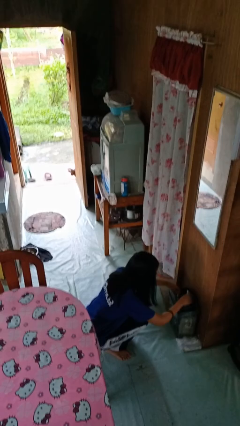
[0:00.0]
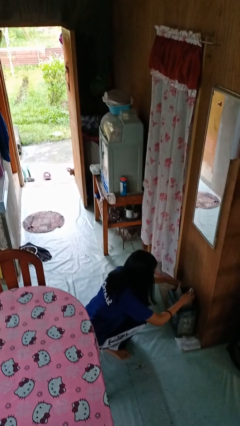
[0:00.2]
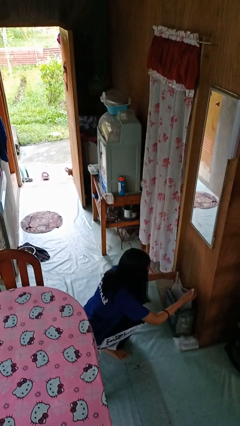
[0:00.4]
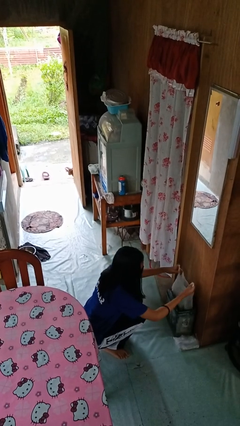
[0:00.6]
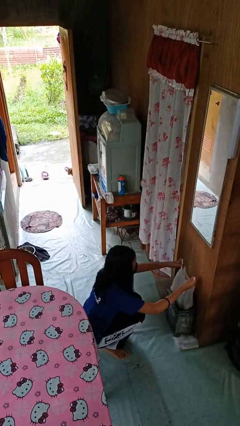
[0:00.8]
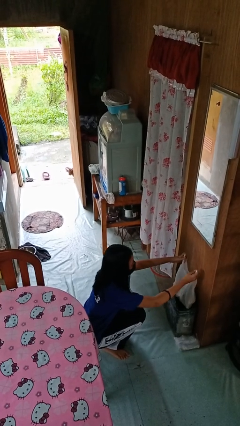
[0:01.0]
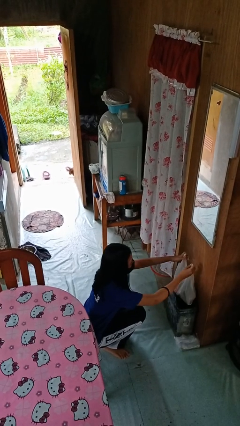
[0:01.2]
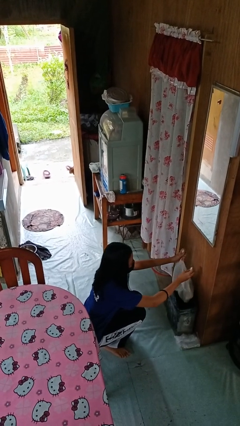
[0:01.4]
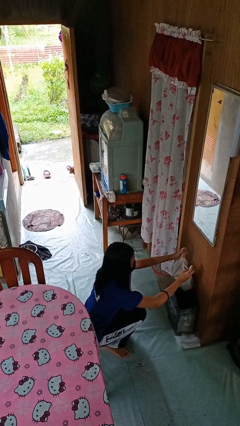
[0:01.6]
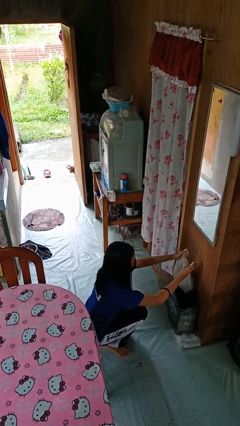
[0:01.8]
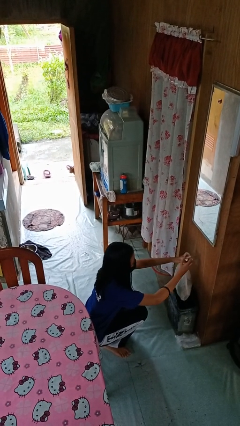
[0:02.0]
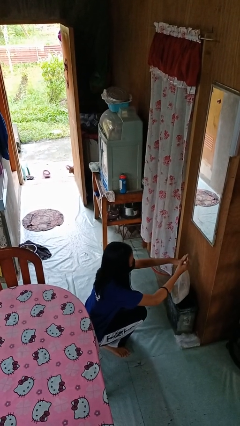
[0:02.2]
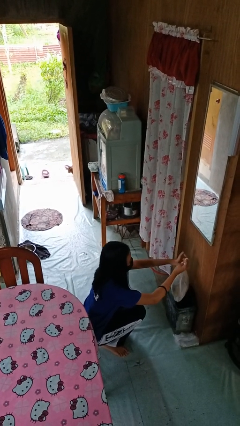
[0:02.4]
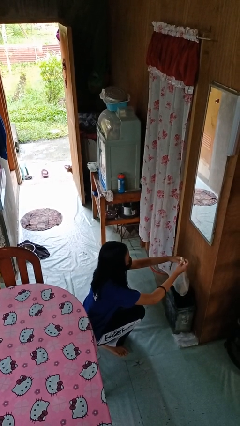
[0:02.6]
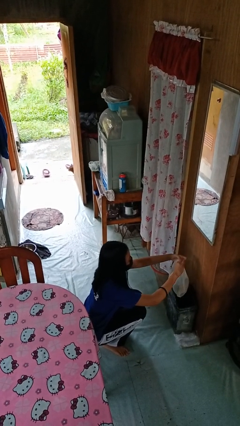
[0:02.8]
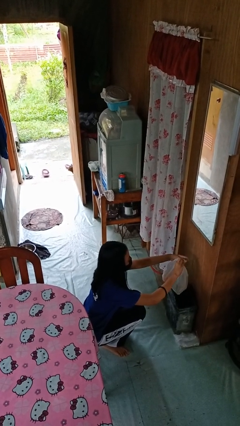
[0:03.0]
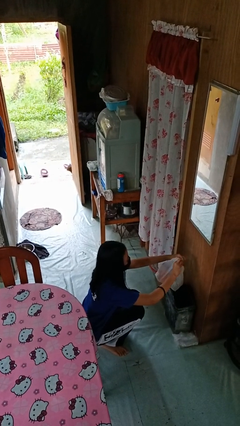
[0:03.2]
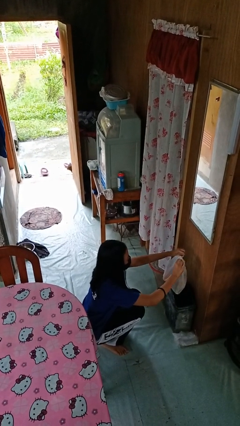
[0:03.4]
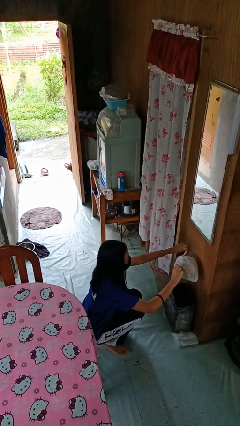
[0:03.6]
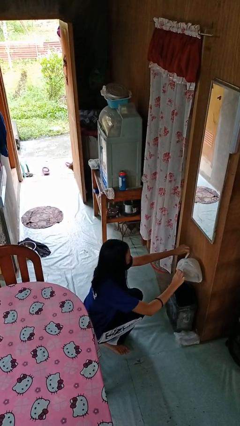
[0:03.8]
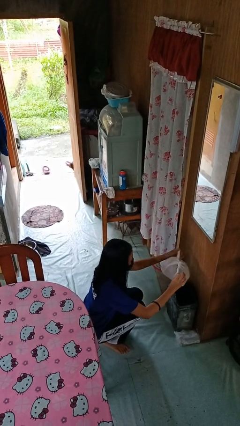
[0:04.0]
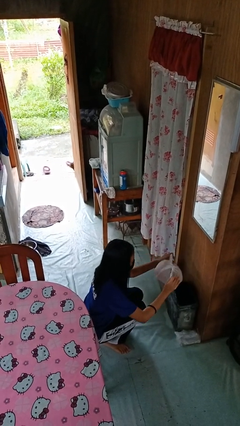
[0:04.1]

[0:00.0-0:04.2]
person removes trashbag from trashcan

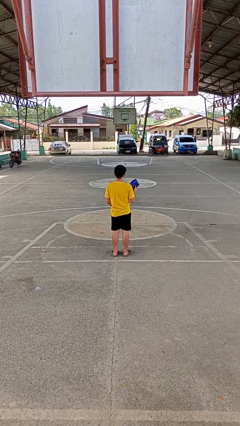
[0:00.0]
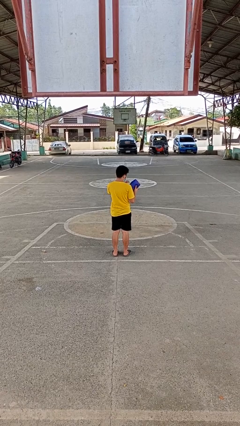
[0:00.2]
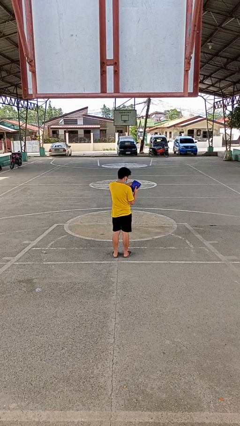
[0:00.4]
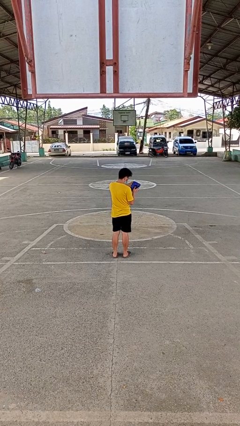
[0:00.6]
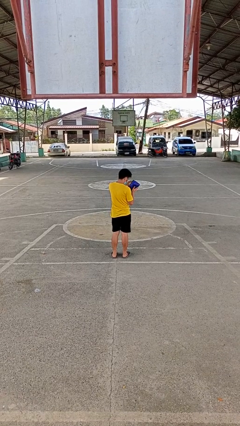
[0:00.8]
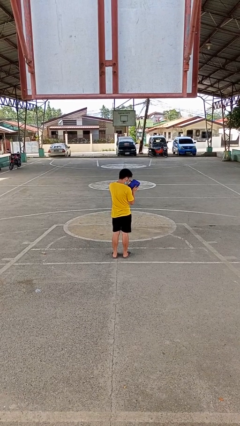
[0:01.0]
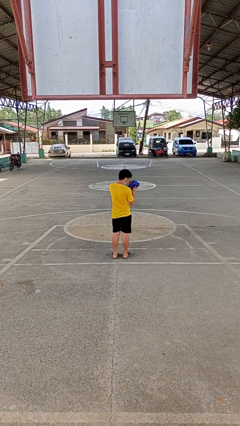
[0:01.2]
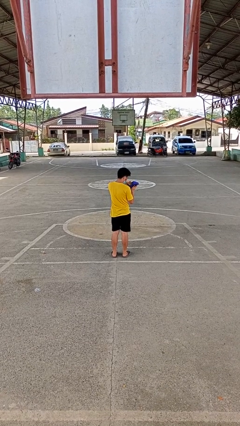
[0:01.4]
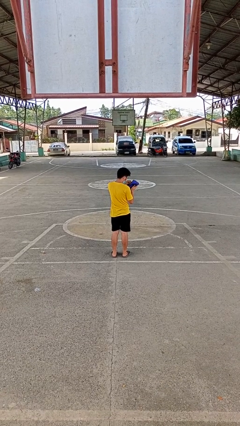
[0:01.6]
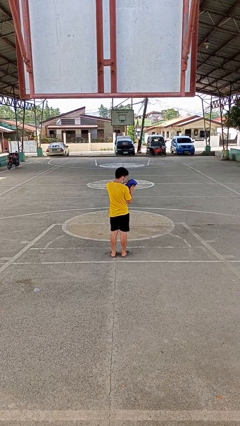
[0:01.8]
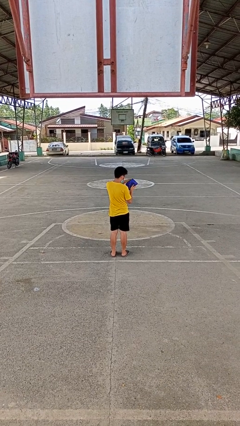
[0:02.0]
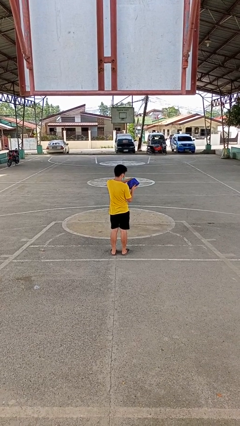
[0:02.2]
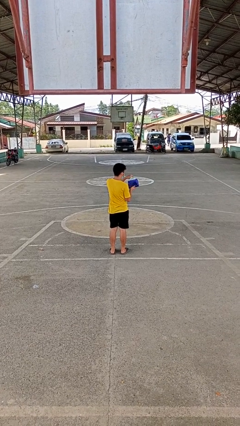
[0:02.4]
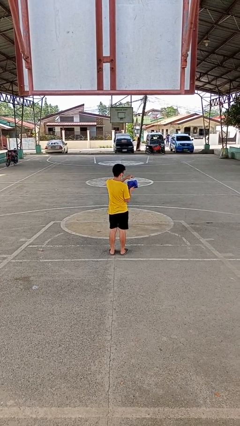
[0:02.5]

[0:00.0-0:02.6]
person searches in purse

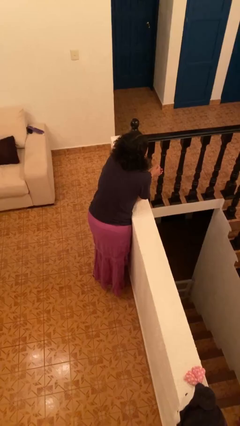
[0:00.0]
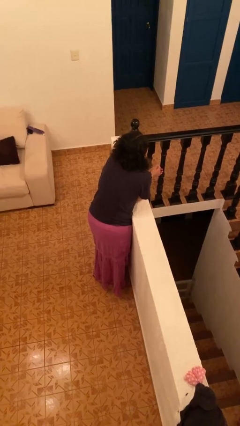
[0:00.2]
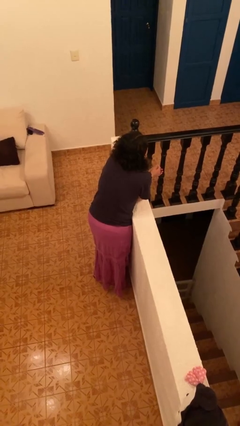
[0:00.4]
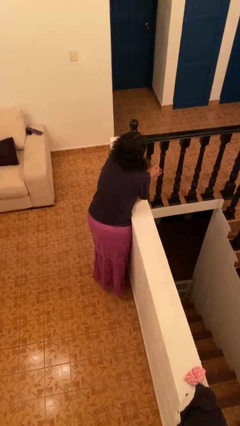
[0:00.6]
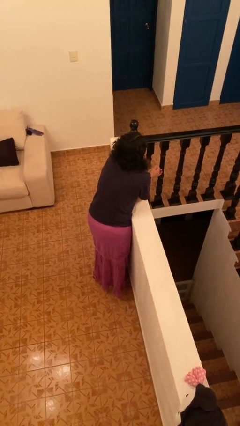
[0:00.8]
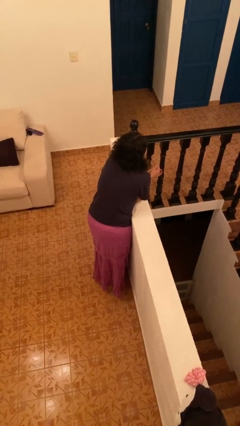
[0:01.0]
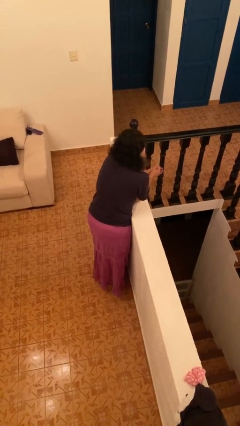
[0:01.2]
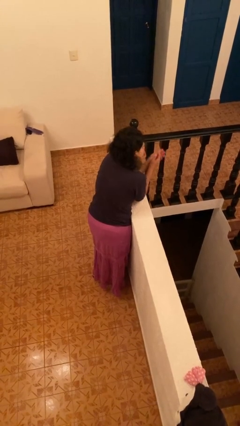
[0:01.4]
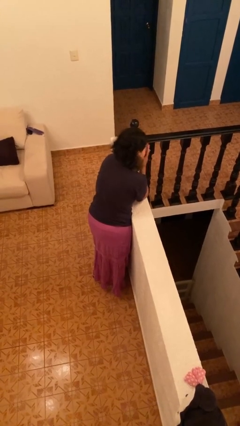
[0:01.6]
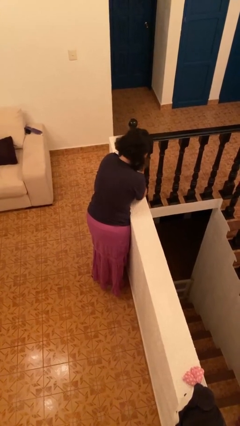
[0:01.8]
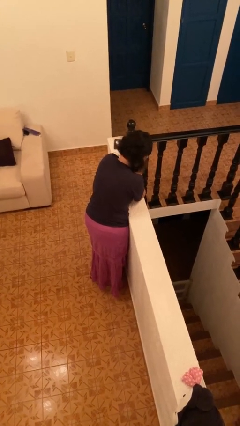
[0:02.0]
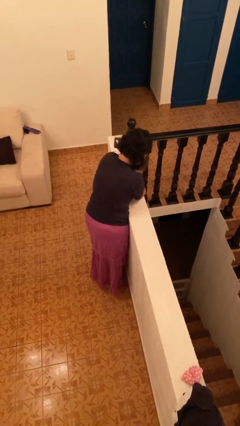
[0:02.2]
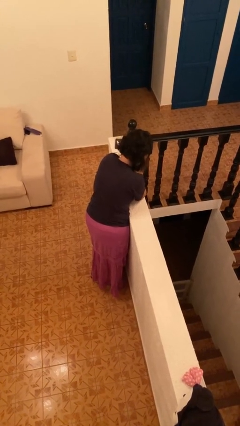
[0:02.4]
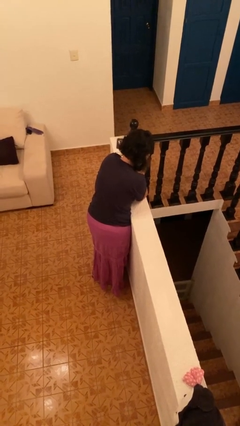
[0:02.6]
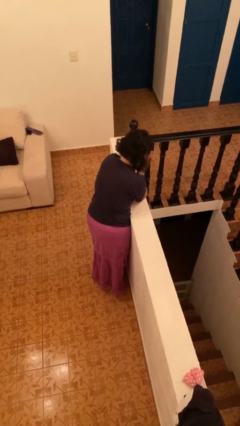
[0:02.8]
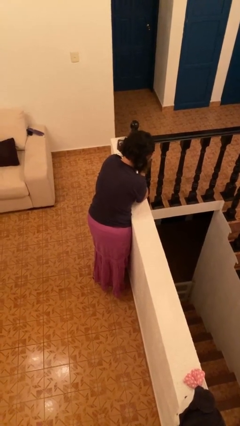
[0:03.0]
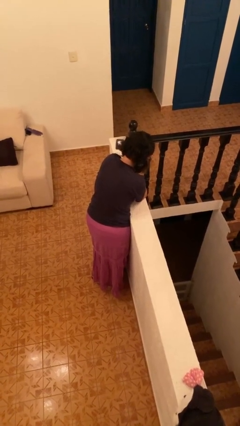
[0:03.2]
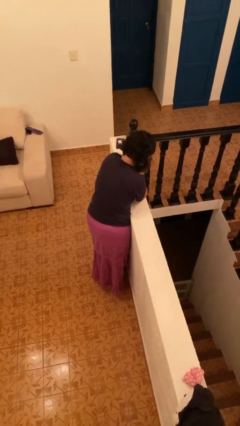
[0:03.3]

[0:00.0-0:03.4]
person covers face with hands

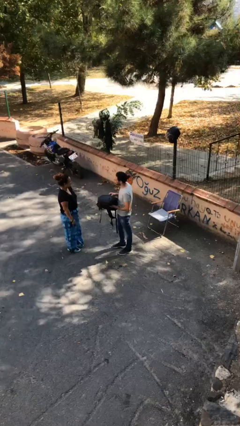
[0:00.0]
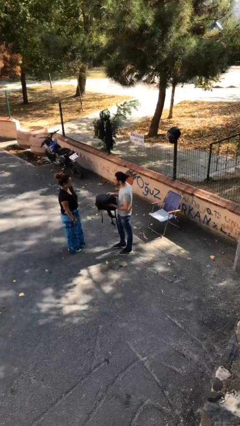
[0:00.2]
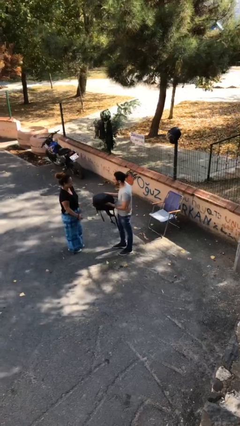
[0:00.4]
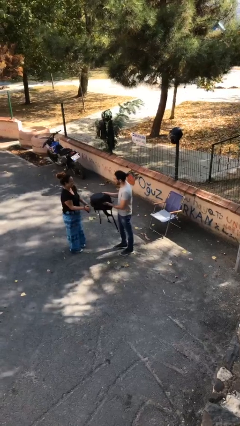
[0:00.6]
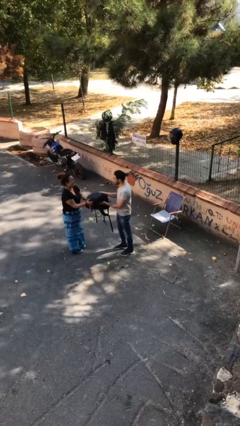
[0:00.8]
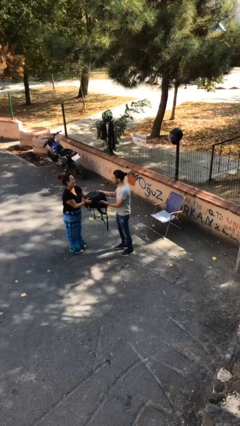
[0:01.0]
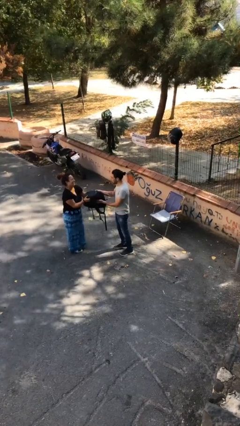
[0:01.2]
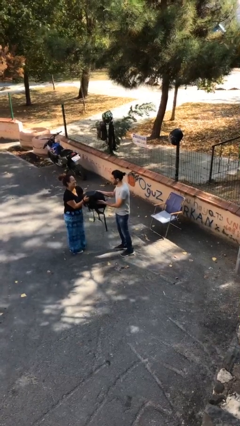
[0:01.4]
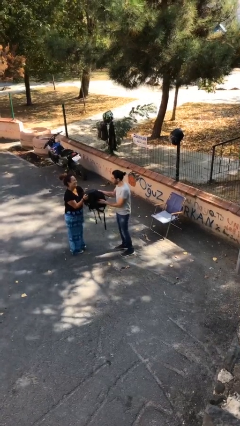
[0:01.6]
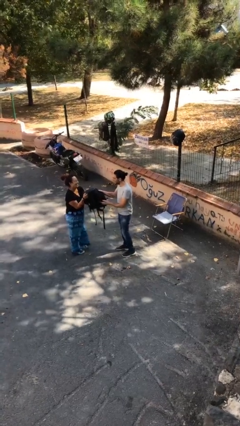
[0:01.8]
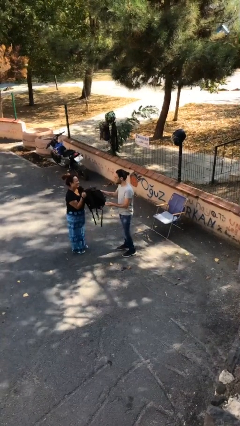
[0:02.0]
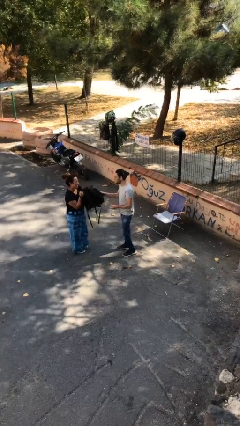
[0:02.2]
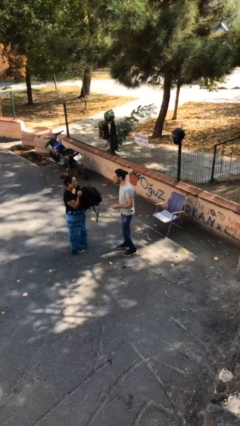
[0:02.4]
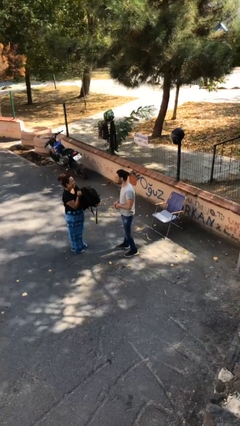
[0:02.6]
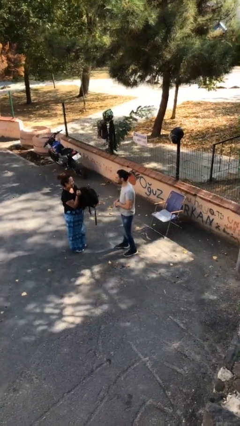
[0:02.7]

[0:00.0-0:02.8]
person transfers object to person

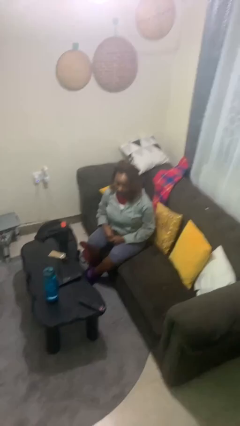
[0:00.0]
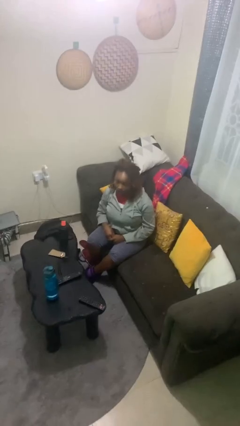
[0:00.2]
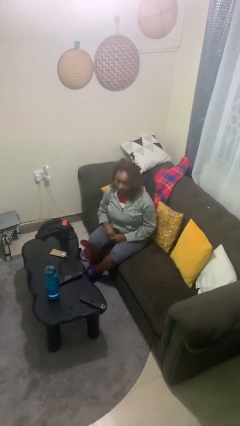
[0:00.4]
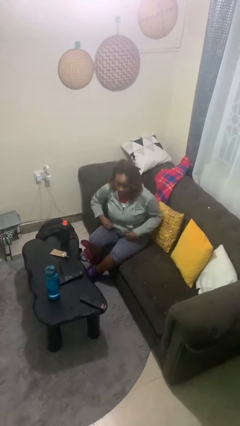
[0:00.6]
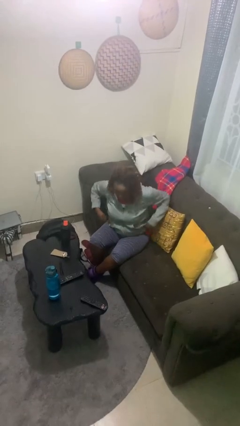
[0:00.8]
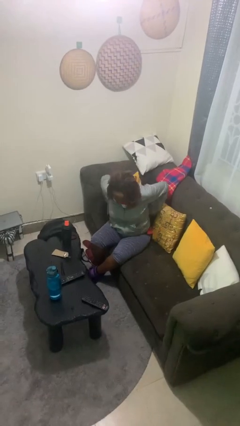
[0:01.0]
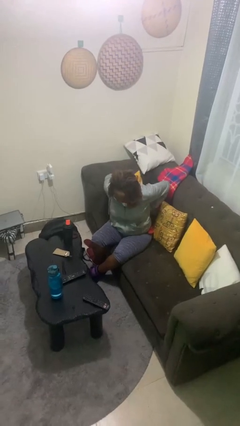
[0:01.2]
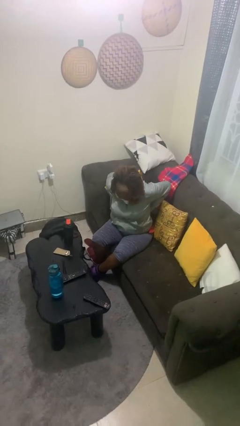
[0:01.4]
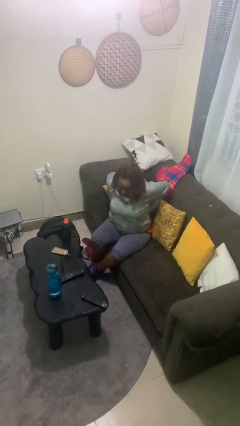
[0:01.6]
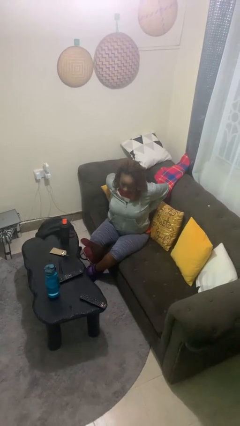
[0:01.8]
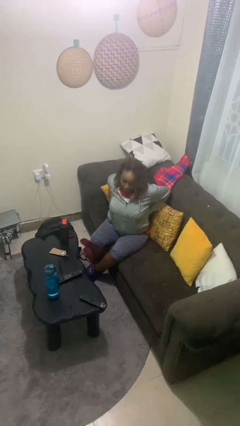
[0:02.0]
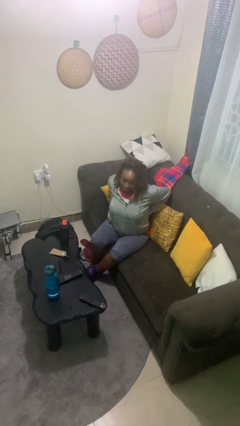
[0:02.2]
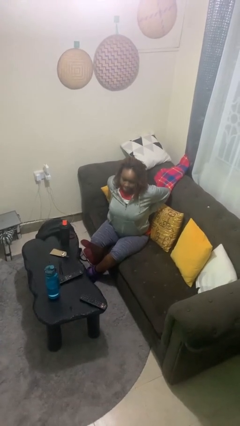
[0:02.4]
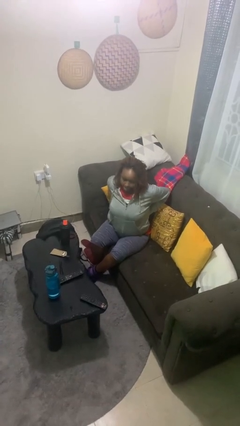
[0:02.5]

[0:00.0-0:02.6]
person stretches back

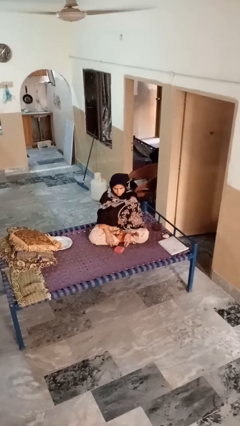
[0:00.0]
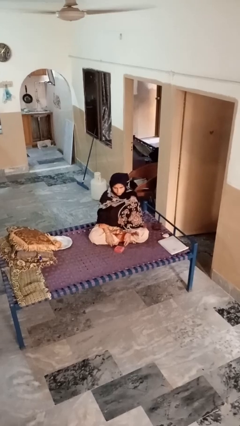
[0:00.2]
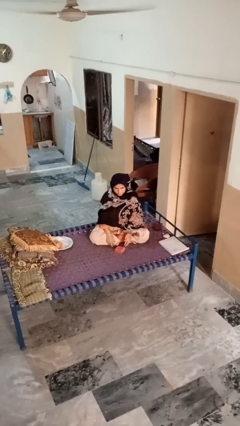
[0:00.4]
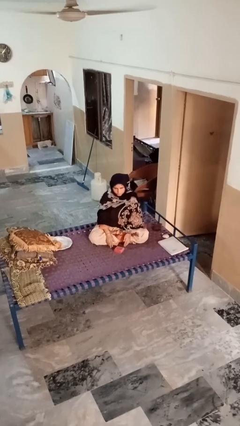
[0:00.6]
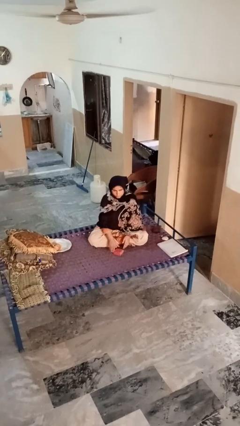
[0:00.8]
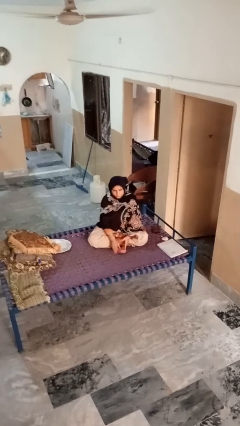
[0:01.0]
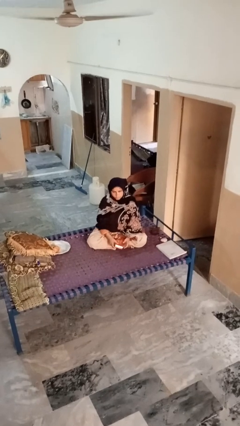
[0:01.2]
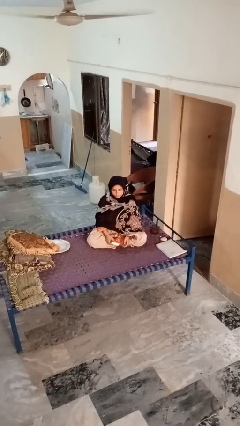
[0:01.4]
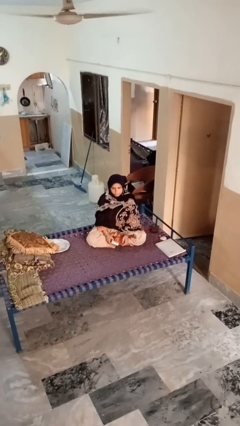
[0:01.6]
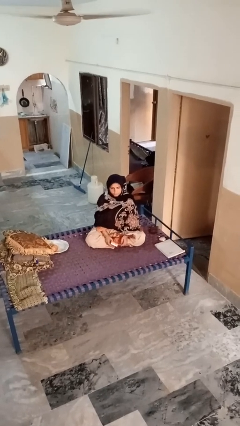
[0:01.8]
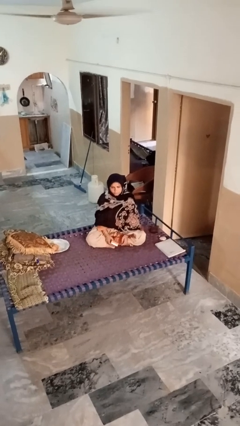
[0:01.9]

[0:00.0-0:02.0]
person picks up object from floor
